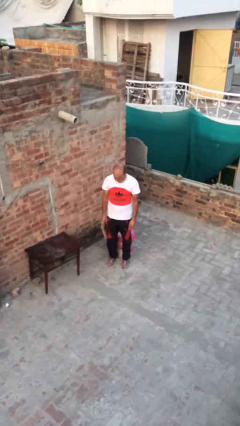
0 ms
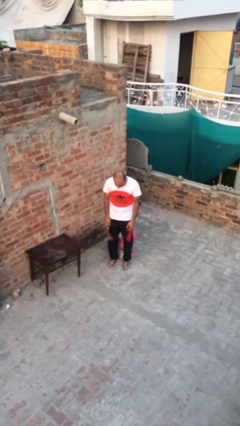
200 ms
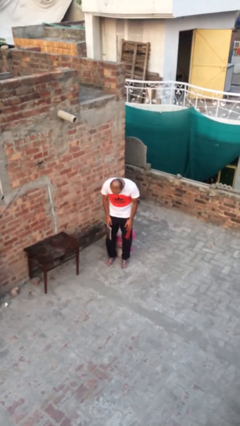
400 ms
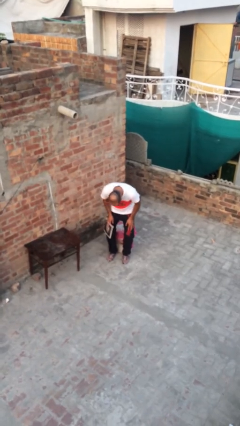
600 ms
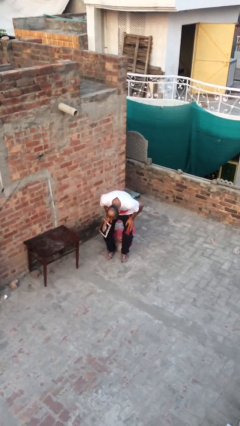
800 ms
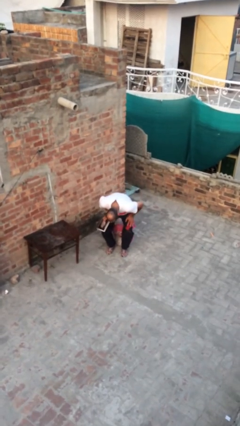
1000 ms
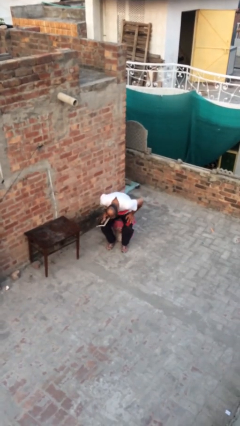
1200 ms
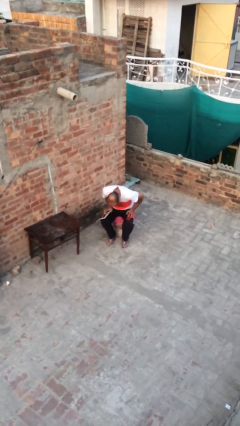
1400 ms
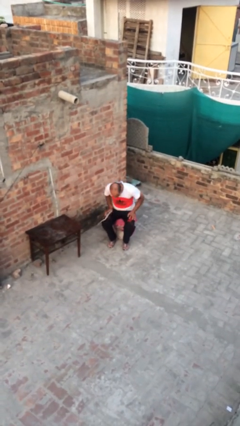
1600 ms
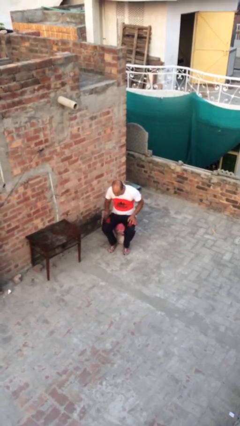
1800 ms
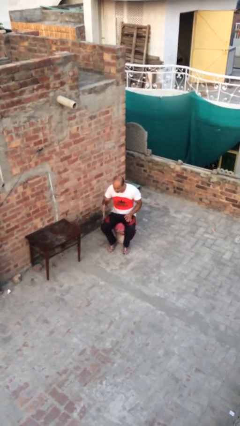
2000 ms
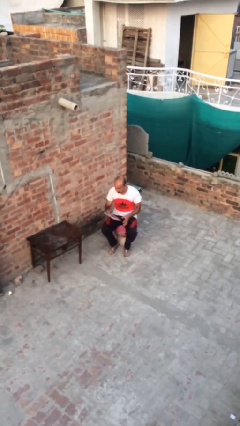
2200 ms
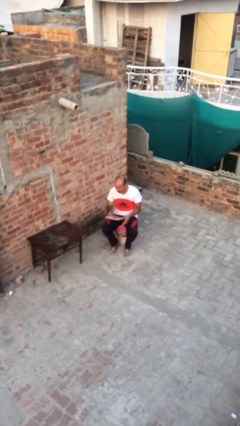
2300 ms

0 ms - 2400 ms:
person sits down

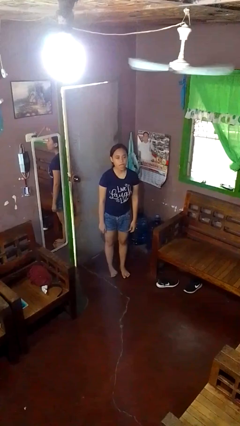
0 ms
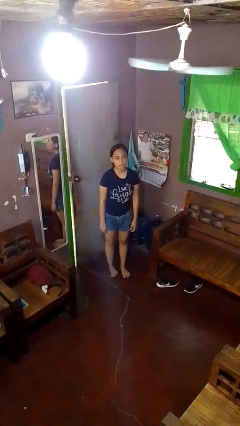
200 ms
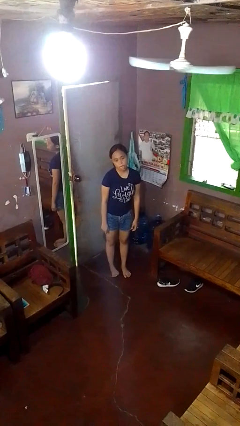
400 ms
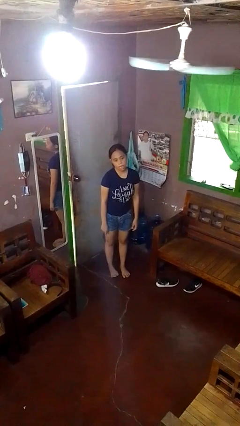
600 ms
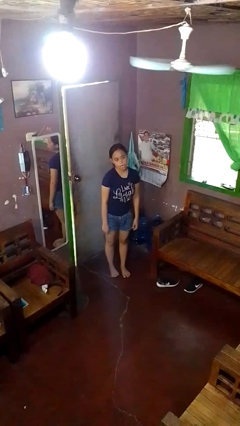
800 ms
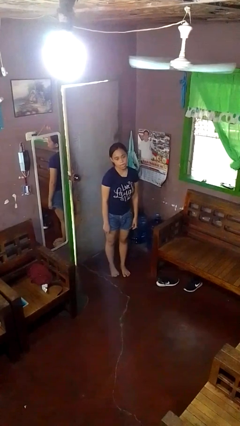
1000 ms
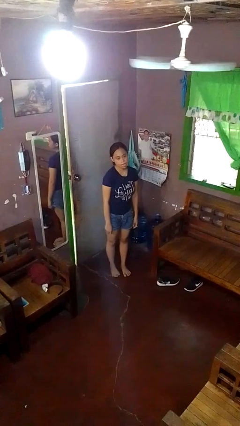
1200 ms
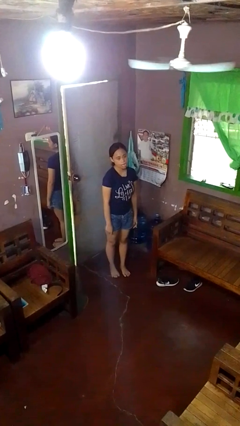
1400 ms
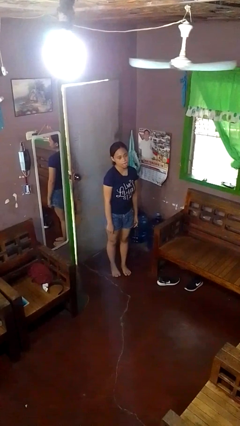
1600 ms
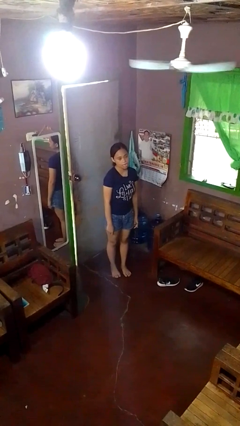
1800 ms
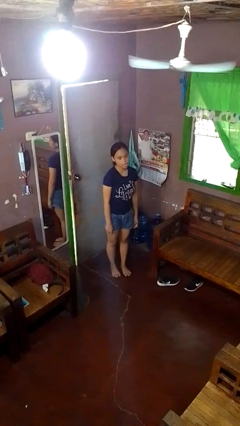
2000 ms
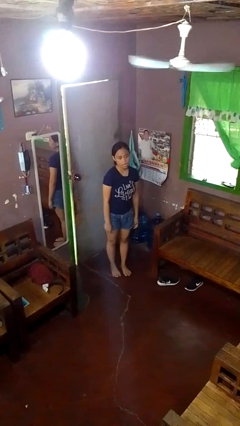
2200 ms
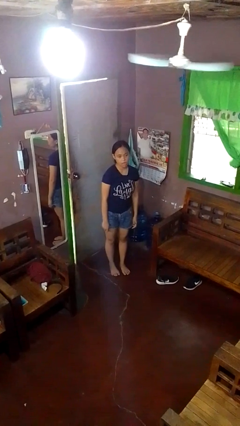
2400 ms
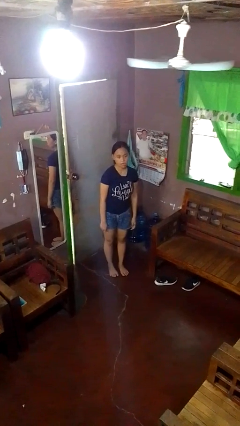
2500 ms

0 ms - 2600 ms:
person sticks out tongue

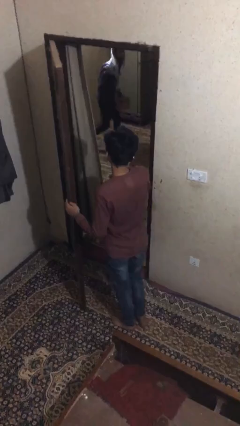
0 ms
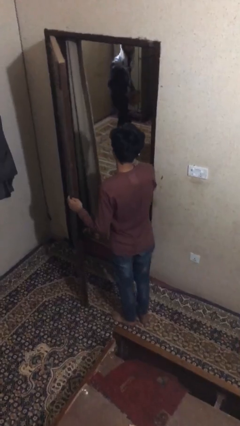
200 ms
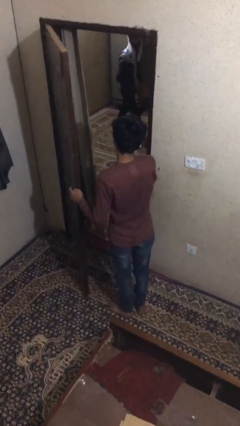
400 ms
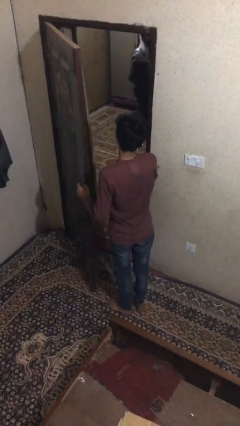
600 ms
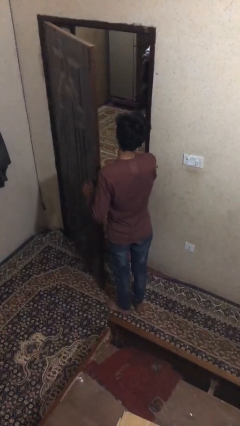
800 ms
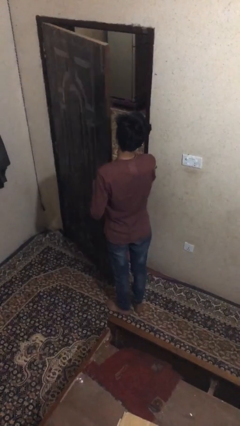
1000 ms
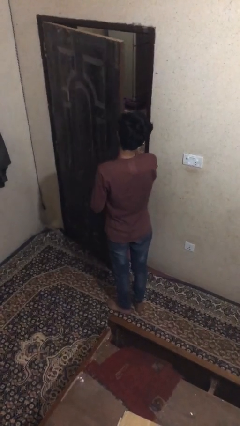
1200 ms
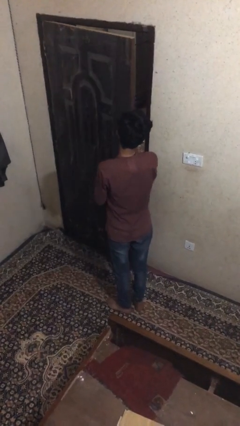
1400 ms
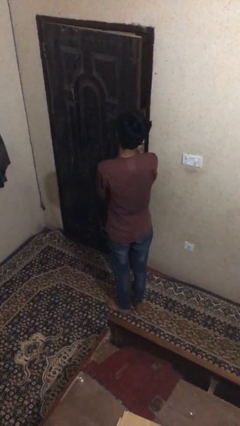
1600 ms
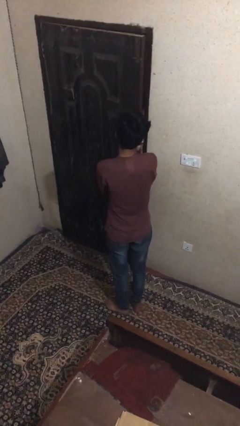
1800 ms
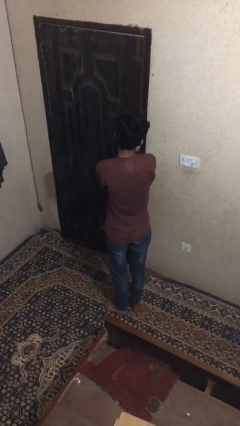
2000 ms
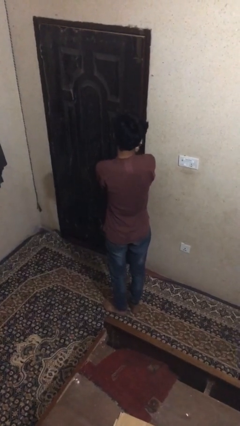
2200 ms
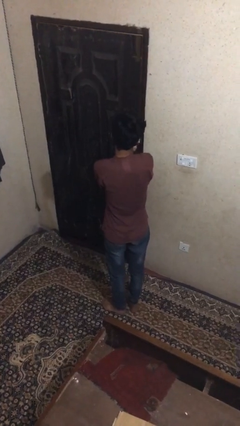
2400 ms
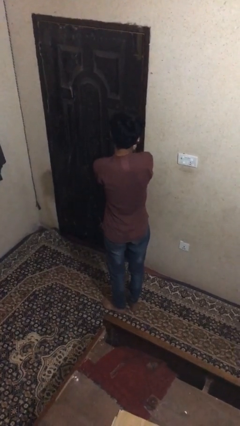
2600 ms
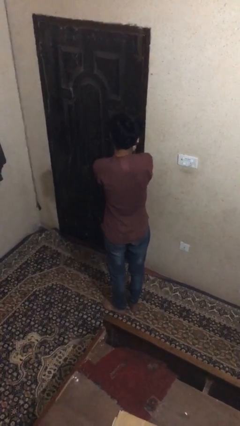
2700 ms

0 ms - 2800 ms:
person closes facility door

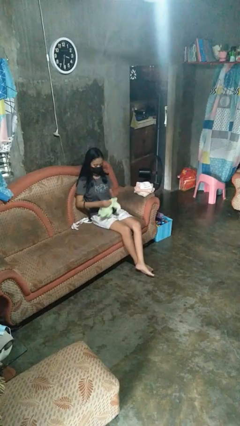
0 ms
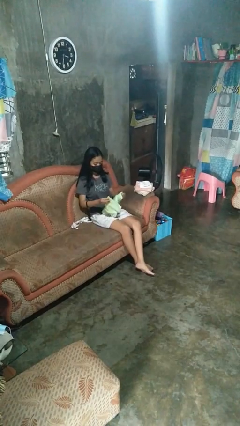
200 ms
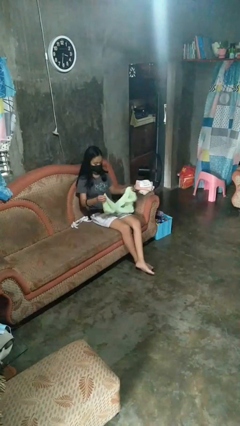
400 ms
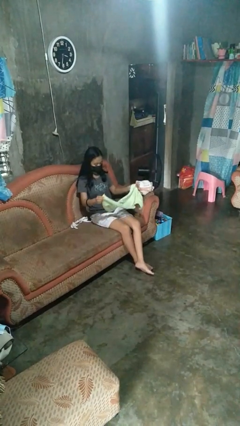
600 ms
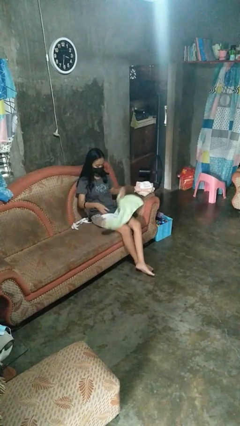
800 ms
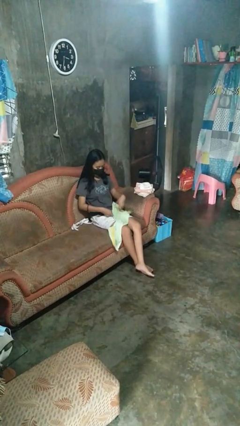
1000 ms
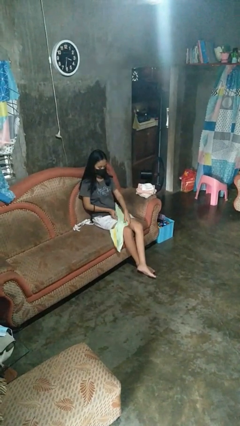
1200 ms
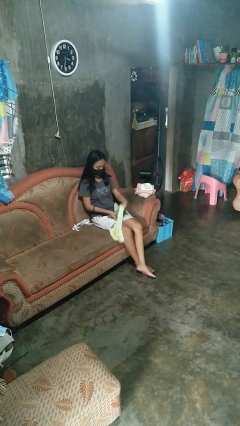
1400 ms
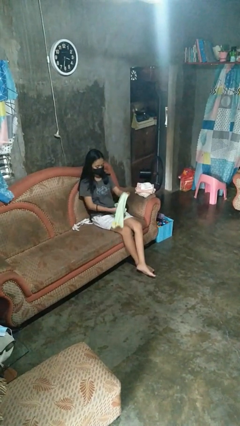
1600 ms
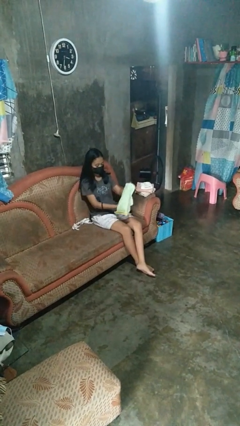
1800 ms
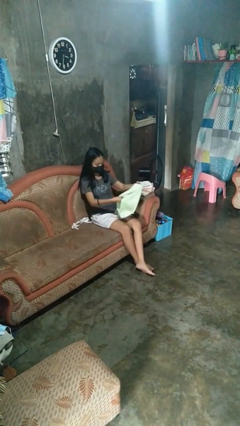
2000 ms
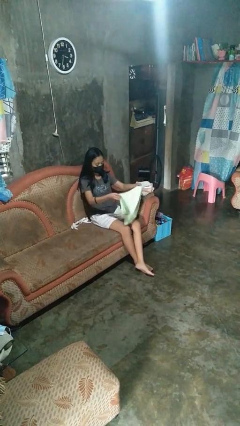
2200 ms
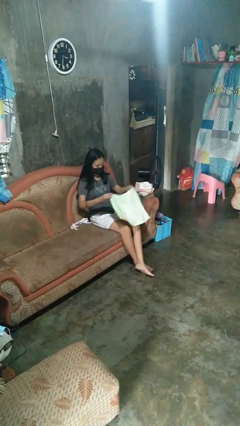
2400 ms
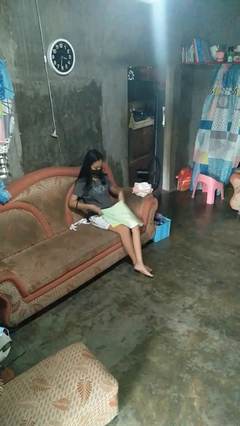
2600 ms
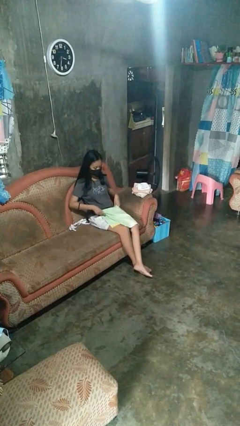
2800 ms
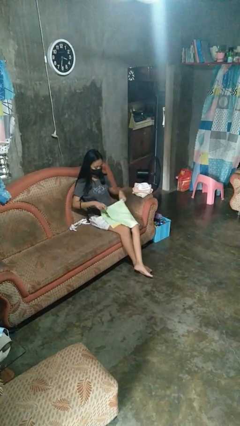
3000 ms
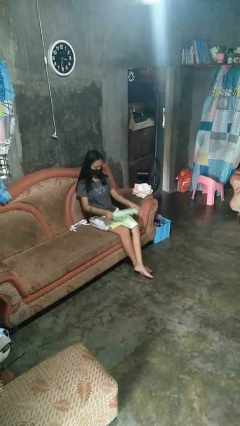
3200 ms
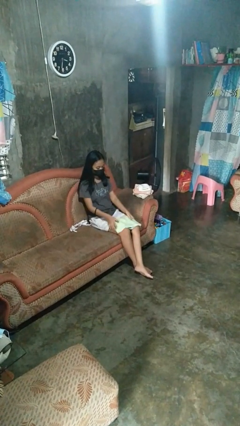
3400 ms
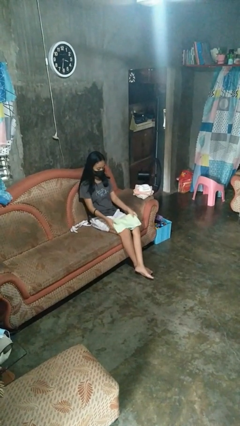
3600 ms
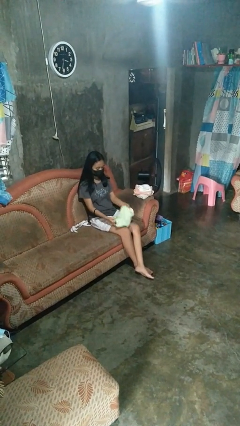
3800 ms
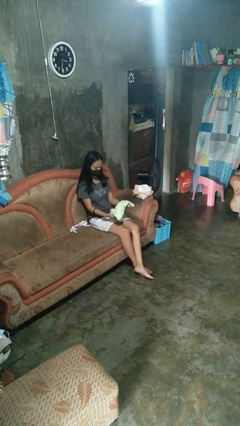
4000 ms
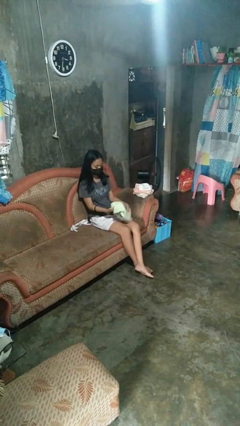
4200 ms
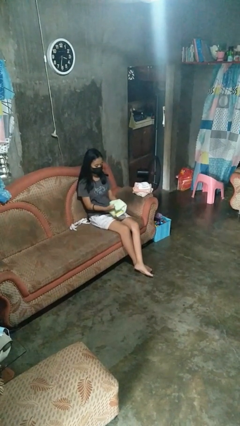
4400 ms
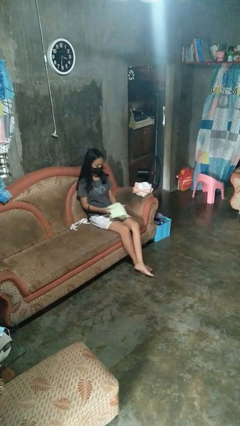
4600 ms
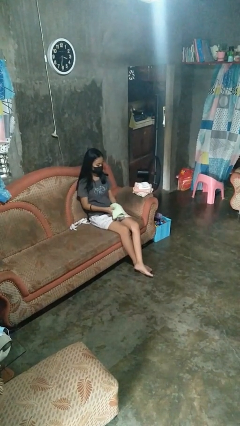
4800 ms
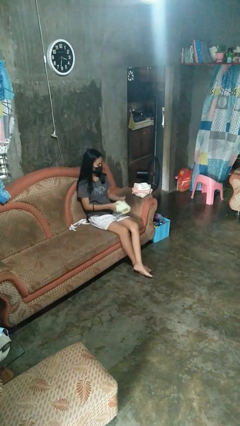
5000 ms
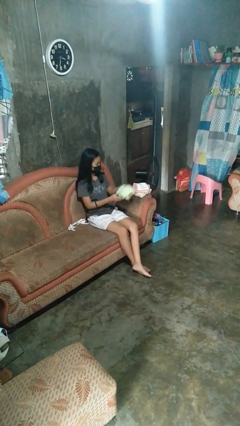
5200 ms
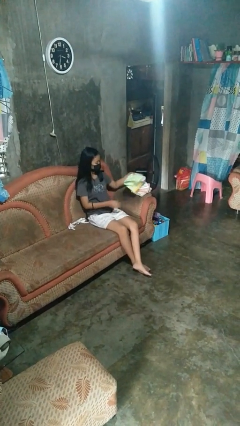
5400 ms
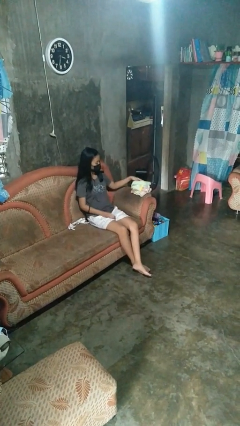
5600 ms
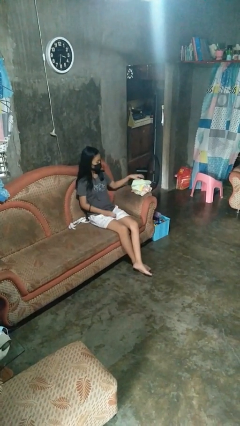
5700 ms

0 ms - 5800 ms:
person folds towel

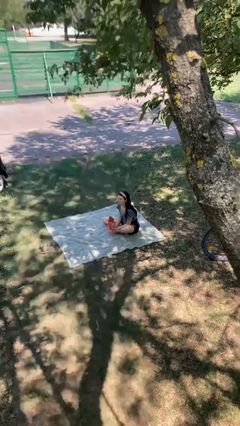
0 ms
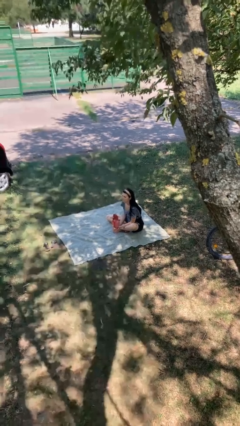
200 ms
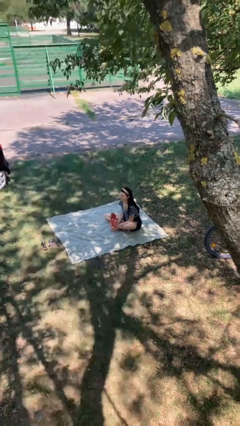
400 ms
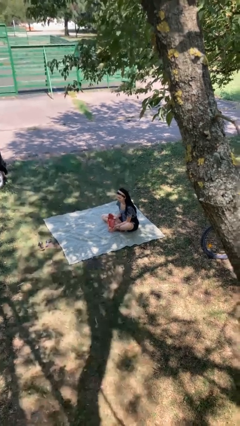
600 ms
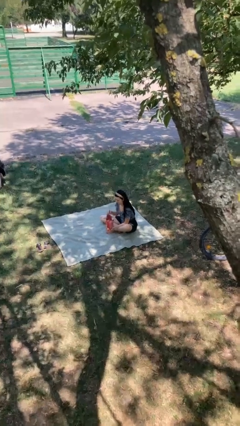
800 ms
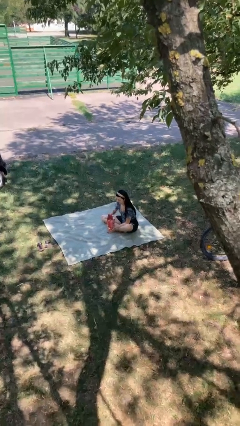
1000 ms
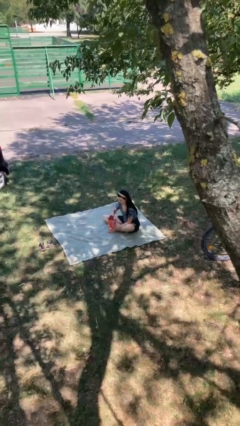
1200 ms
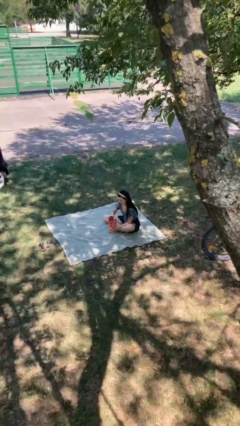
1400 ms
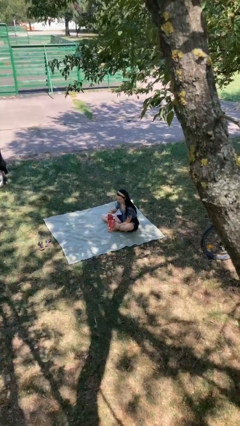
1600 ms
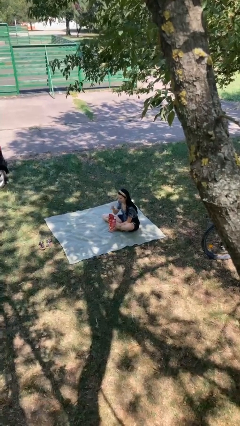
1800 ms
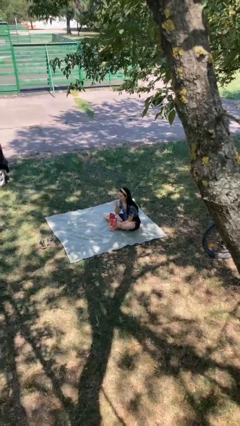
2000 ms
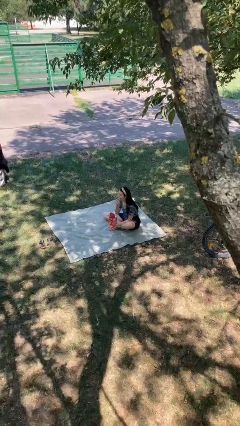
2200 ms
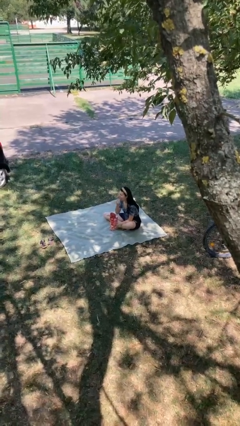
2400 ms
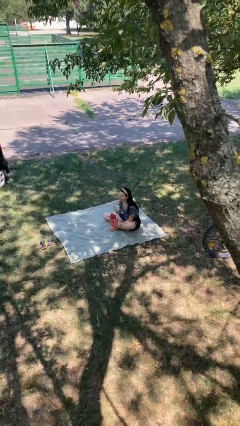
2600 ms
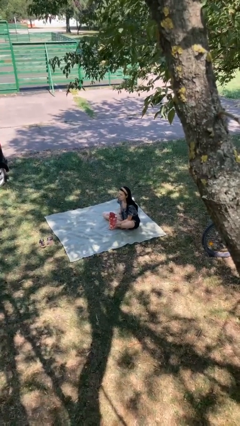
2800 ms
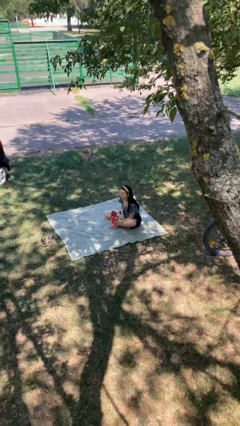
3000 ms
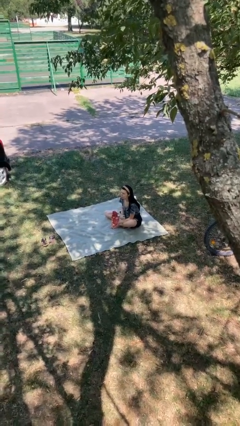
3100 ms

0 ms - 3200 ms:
person eats snack from bag

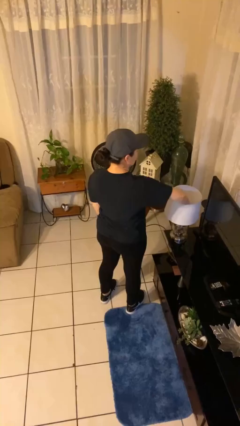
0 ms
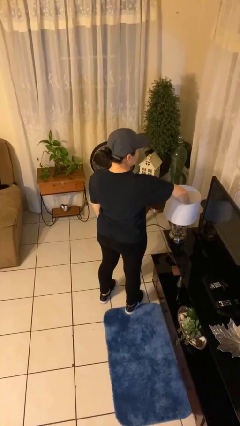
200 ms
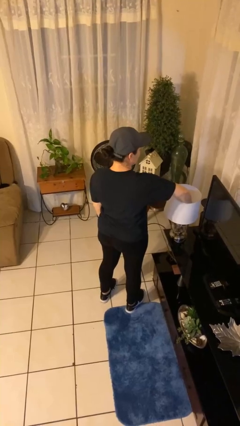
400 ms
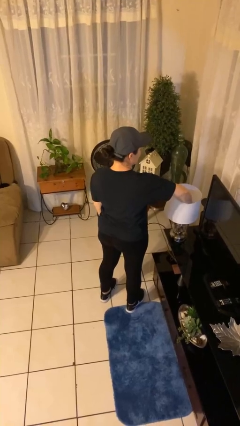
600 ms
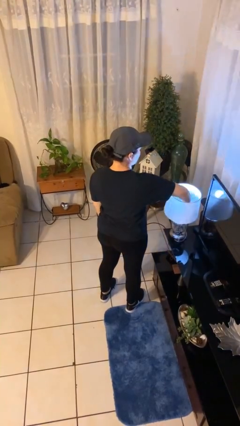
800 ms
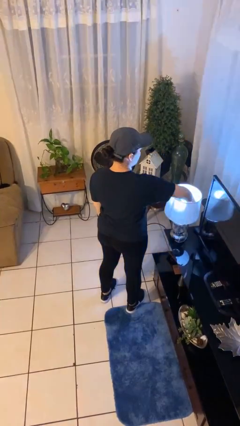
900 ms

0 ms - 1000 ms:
person turns on lamp
